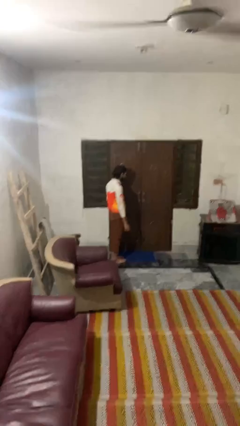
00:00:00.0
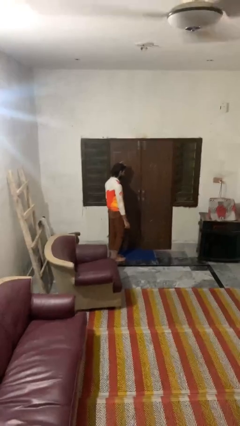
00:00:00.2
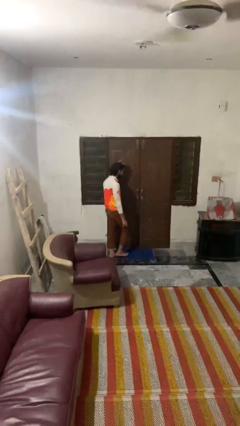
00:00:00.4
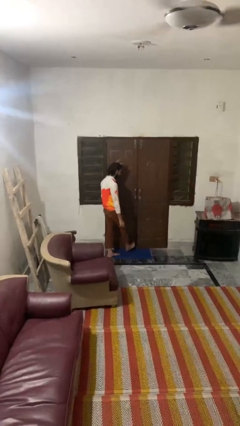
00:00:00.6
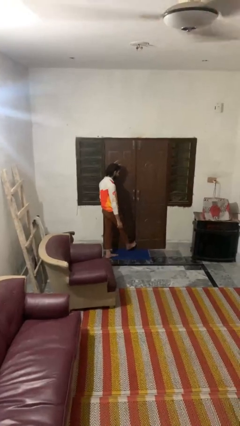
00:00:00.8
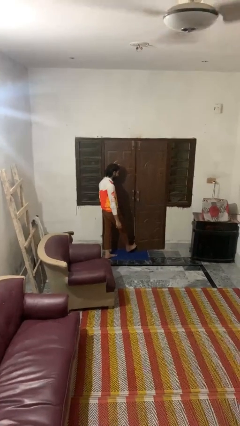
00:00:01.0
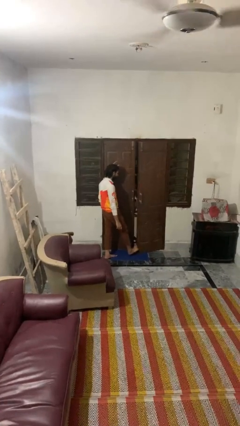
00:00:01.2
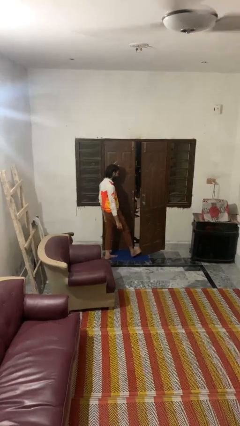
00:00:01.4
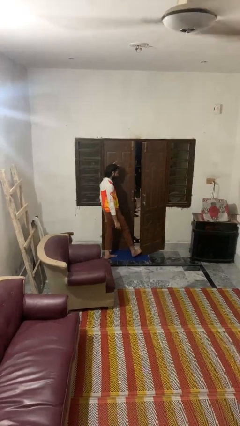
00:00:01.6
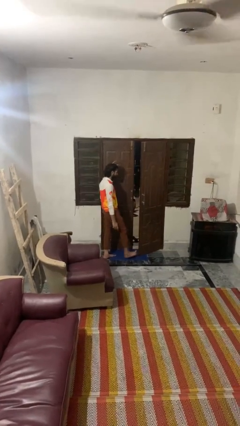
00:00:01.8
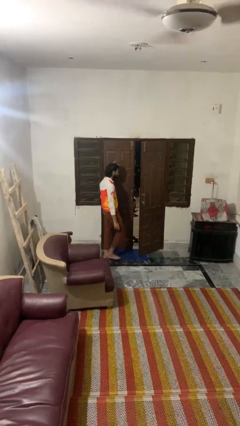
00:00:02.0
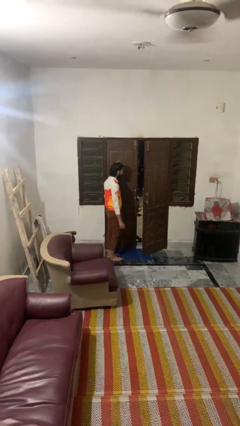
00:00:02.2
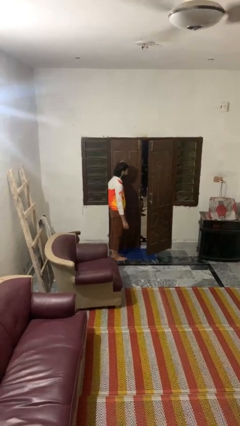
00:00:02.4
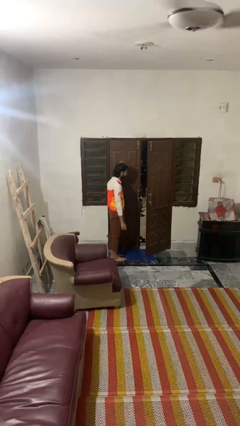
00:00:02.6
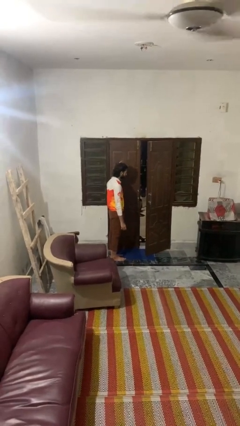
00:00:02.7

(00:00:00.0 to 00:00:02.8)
person opens facility door

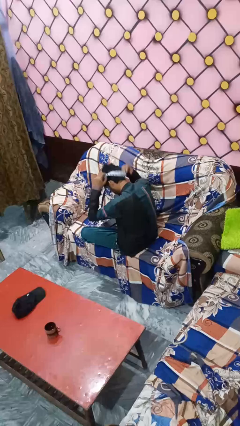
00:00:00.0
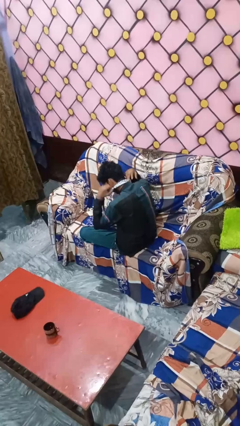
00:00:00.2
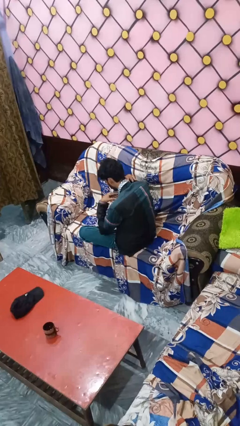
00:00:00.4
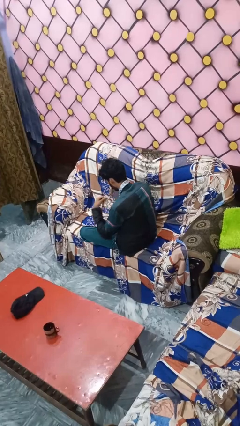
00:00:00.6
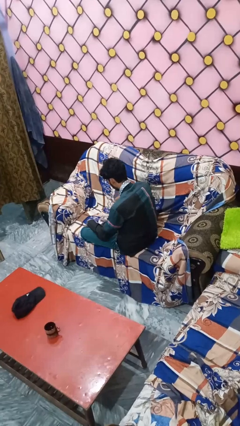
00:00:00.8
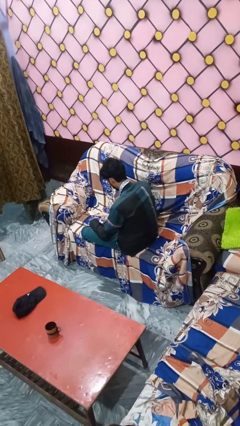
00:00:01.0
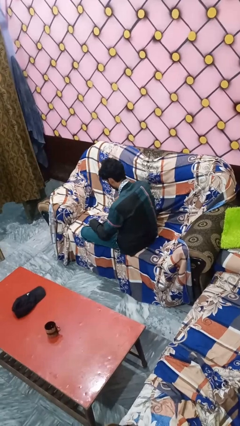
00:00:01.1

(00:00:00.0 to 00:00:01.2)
person puts on necktie

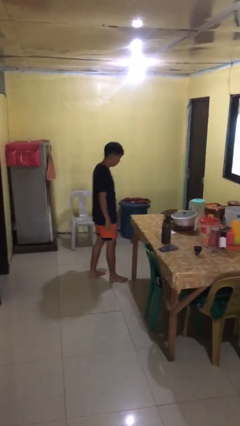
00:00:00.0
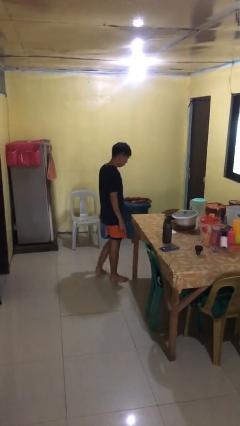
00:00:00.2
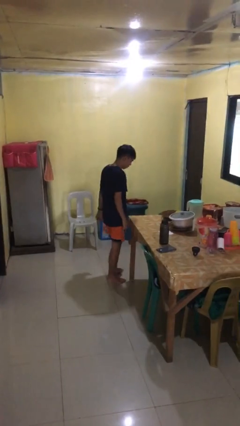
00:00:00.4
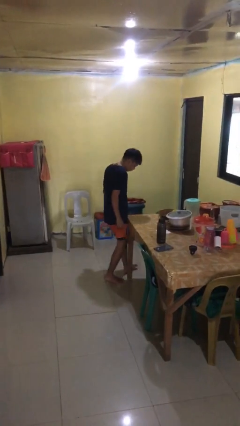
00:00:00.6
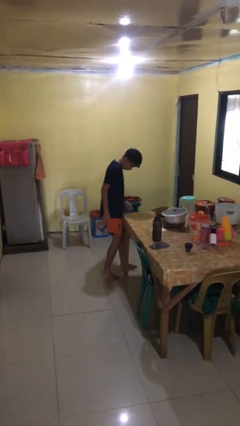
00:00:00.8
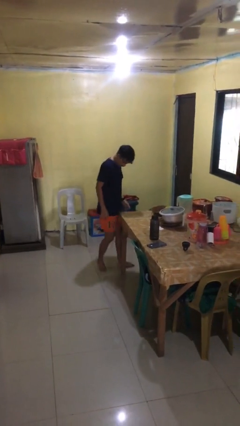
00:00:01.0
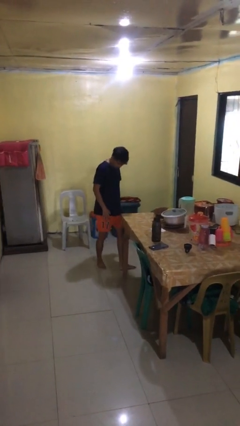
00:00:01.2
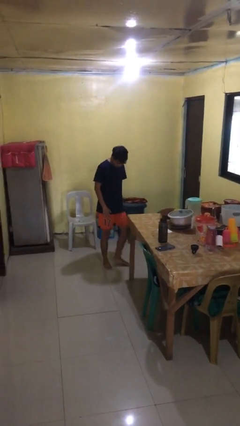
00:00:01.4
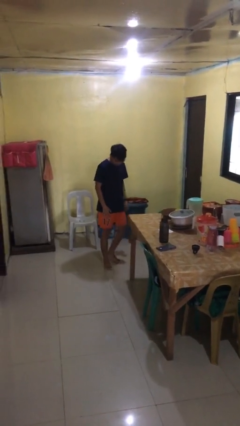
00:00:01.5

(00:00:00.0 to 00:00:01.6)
person bumps into table

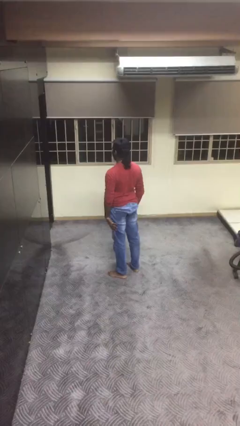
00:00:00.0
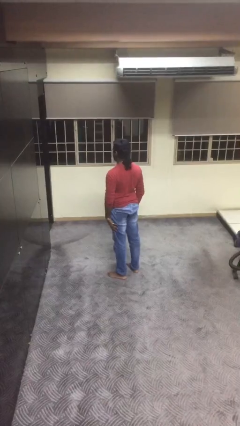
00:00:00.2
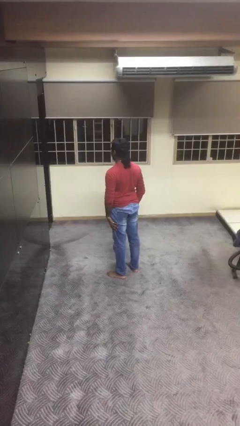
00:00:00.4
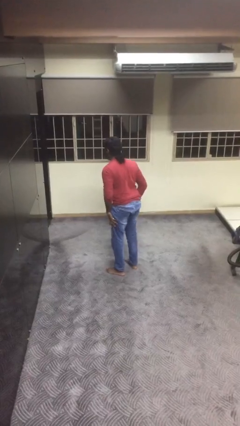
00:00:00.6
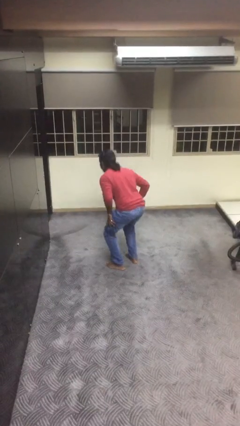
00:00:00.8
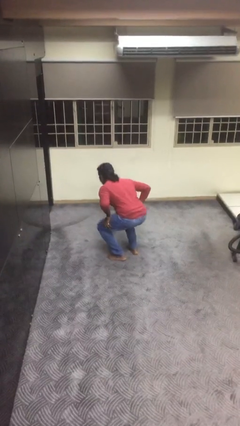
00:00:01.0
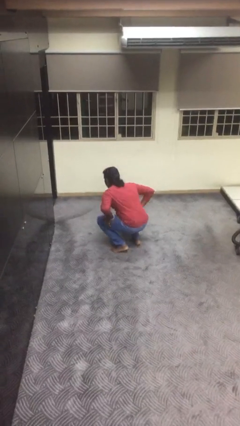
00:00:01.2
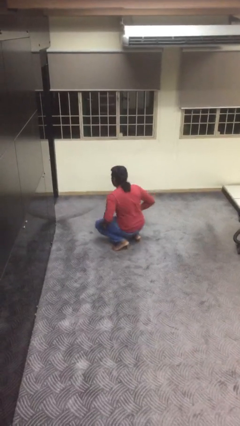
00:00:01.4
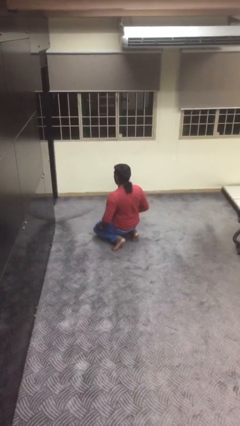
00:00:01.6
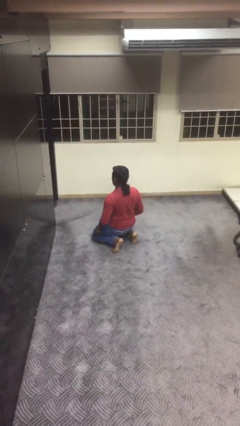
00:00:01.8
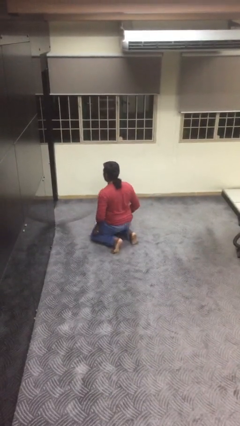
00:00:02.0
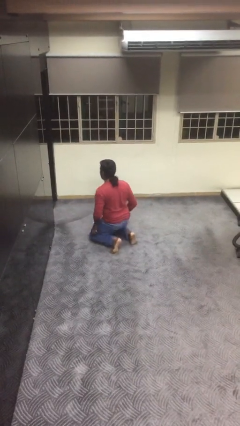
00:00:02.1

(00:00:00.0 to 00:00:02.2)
person kneels

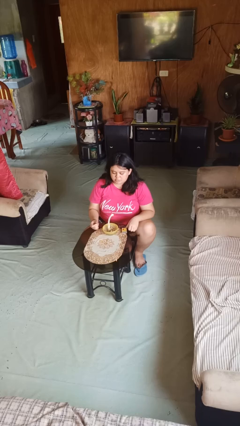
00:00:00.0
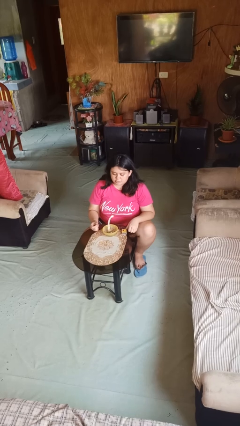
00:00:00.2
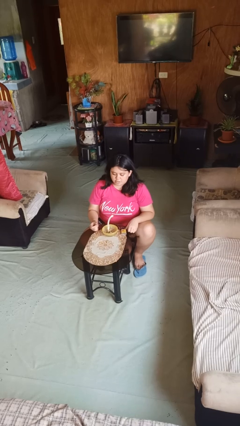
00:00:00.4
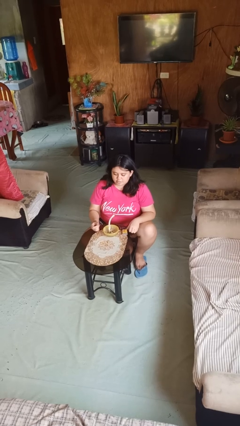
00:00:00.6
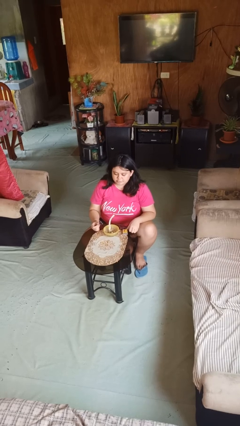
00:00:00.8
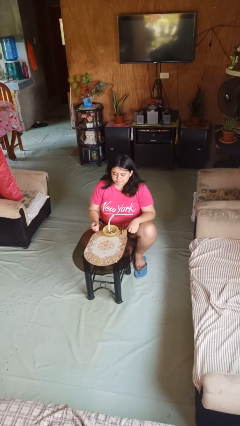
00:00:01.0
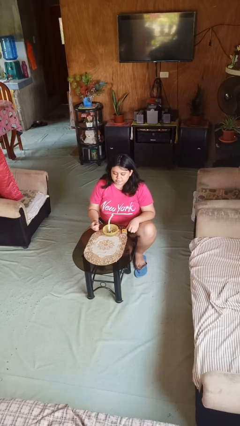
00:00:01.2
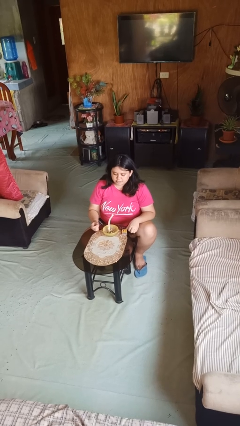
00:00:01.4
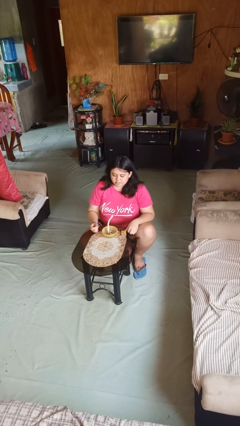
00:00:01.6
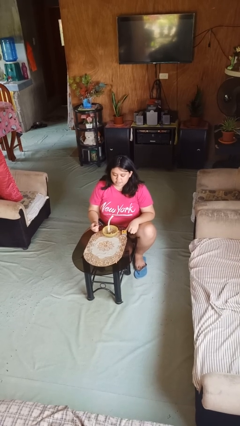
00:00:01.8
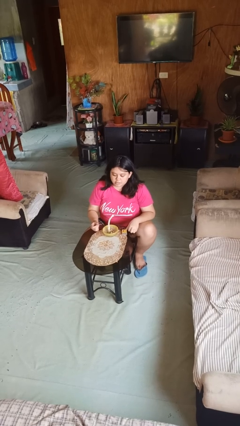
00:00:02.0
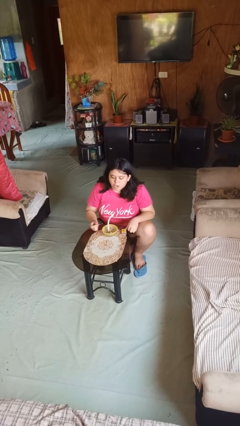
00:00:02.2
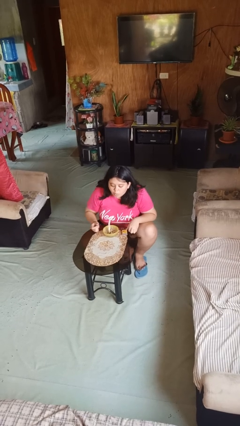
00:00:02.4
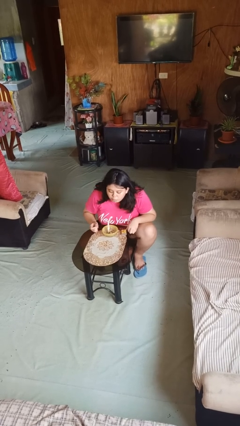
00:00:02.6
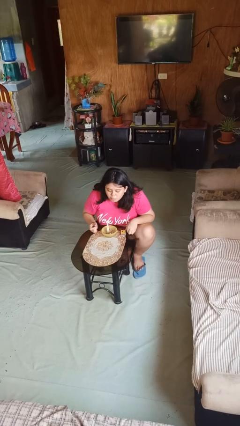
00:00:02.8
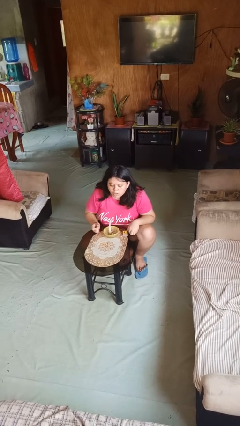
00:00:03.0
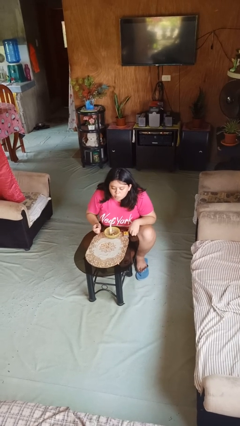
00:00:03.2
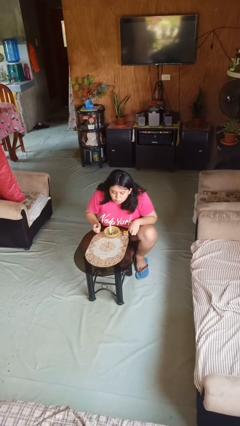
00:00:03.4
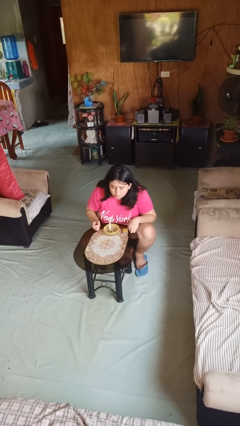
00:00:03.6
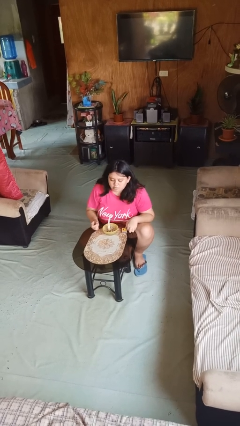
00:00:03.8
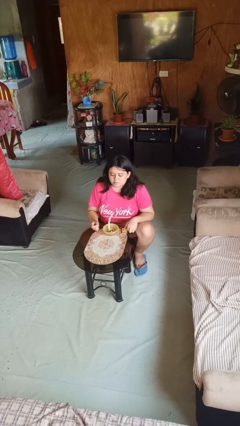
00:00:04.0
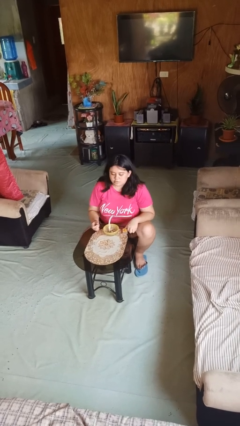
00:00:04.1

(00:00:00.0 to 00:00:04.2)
person extinguishes candle

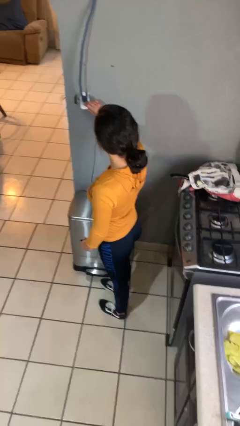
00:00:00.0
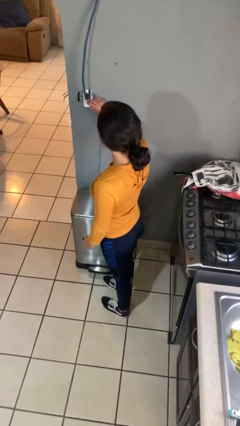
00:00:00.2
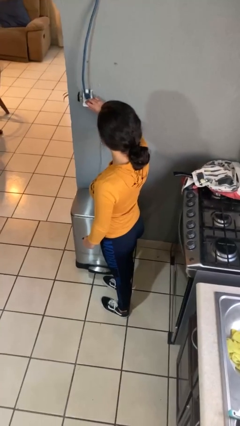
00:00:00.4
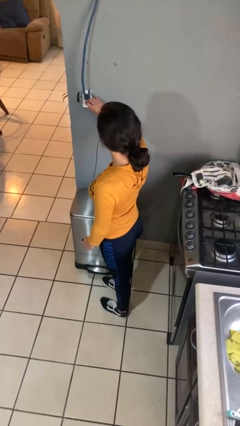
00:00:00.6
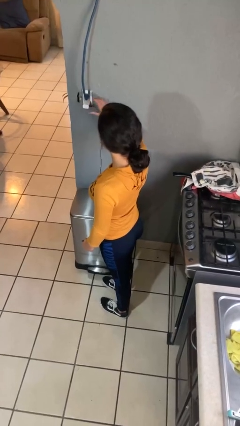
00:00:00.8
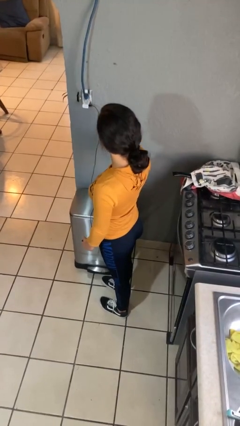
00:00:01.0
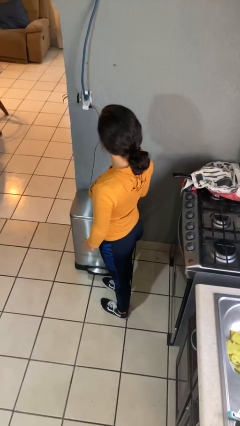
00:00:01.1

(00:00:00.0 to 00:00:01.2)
person plugs into electrical socket

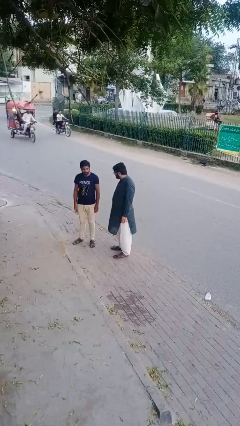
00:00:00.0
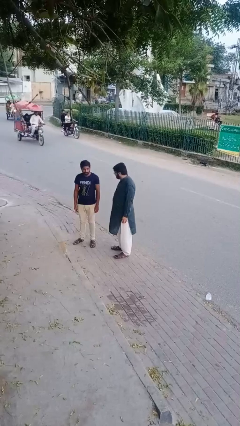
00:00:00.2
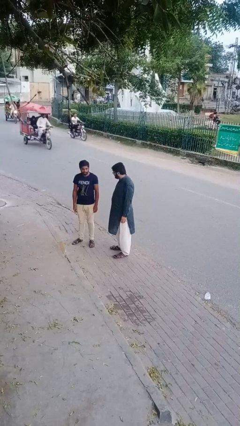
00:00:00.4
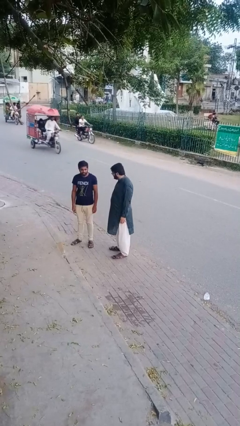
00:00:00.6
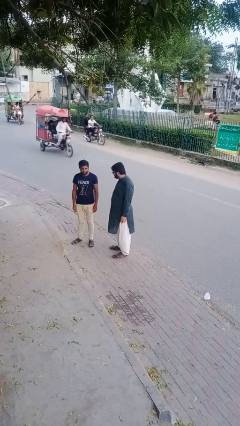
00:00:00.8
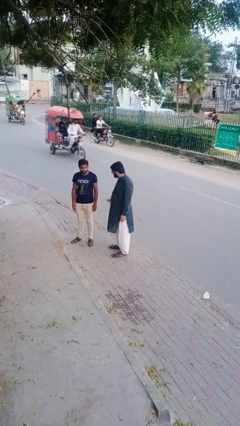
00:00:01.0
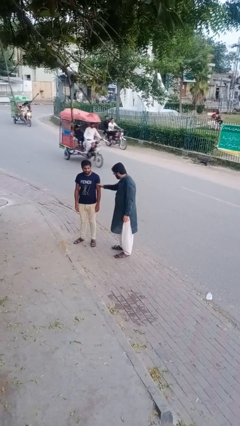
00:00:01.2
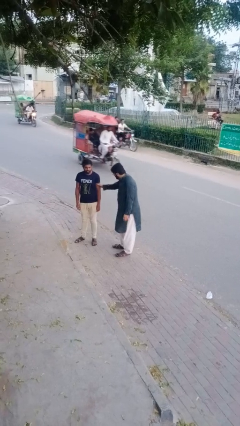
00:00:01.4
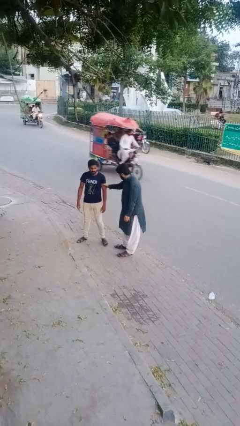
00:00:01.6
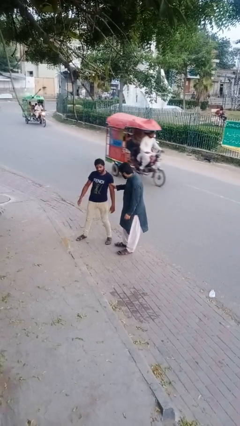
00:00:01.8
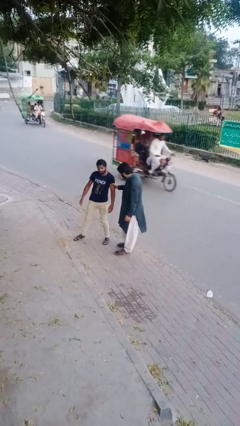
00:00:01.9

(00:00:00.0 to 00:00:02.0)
person grabs person by bicep

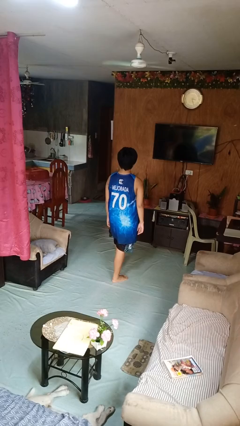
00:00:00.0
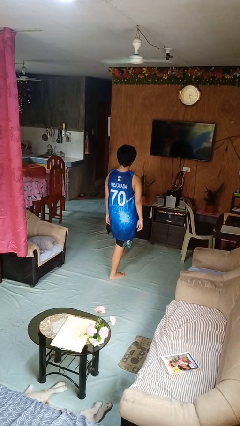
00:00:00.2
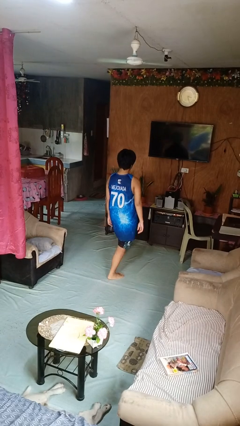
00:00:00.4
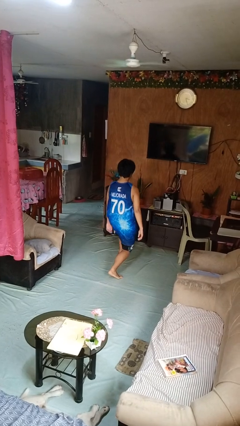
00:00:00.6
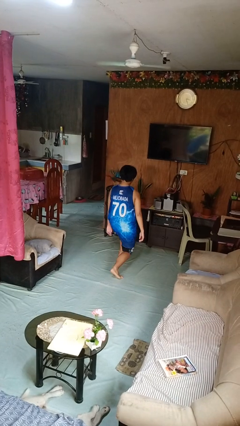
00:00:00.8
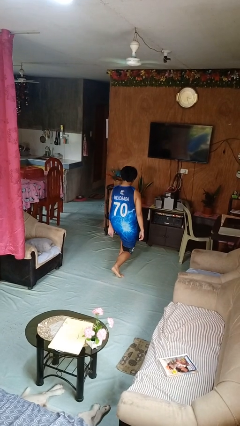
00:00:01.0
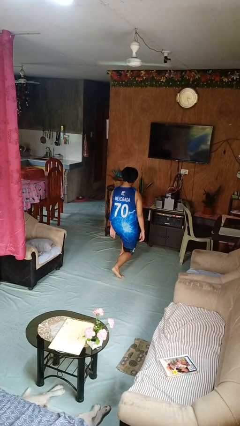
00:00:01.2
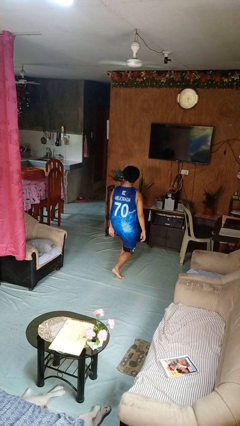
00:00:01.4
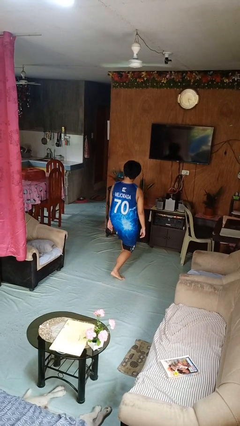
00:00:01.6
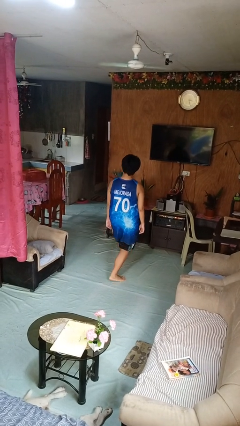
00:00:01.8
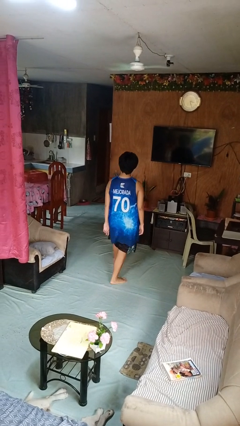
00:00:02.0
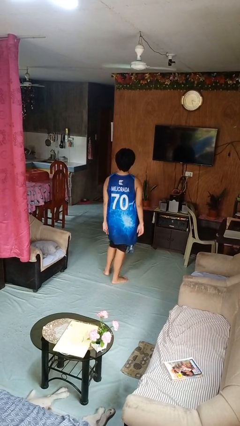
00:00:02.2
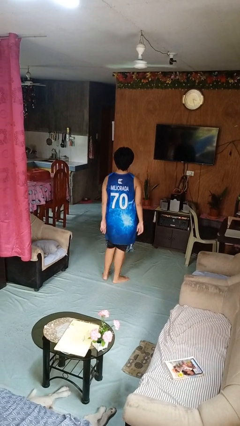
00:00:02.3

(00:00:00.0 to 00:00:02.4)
person exercises with lunges
